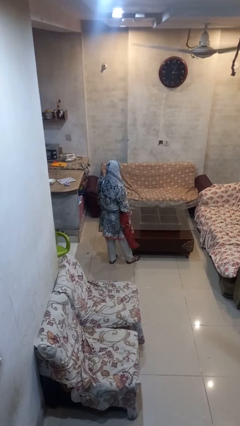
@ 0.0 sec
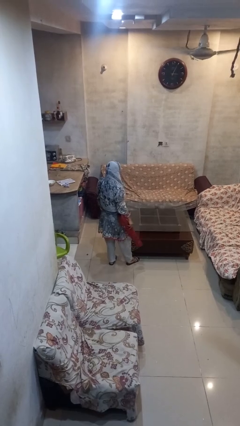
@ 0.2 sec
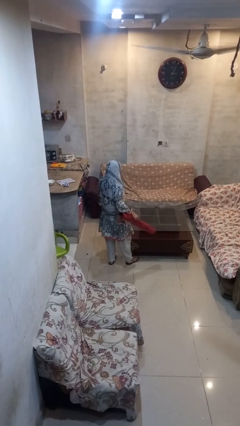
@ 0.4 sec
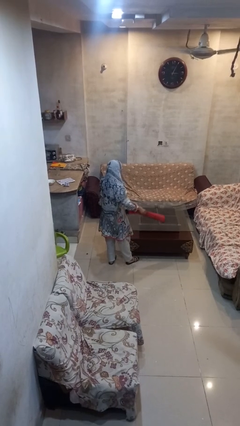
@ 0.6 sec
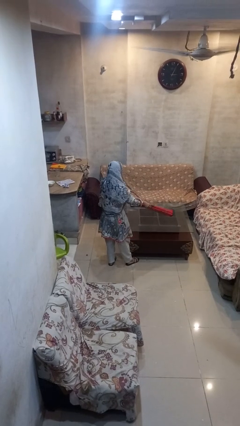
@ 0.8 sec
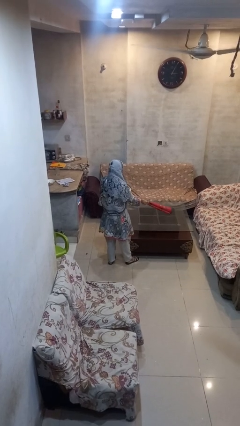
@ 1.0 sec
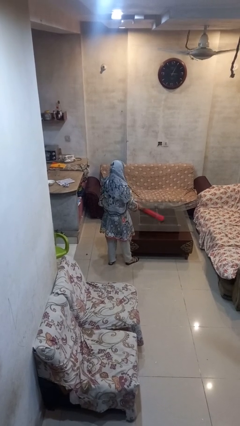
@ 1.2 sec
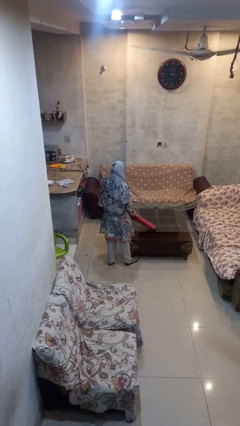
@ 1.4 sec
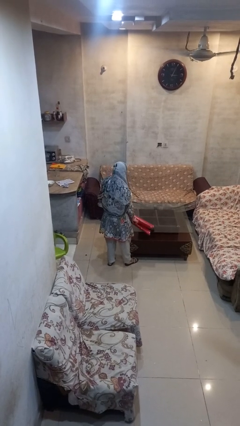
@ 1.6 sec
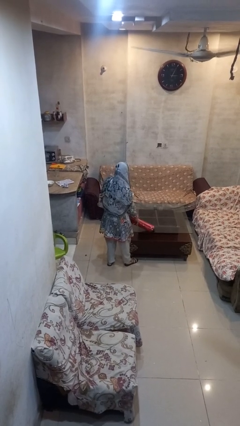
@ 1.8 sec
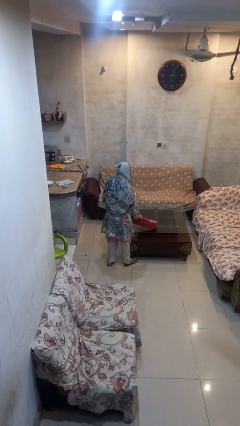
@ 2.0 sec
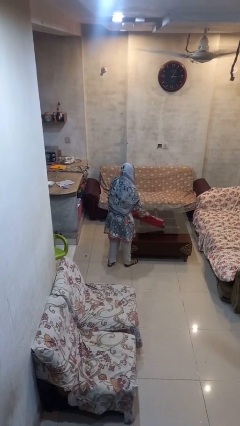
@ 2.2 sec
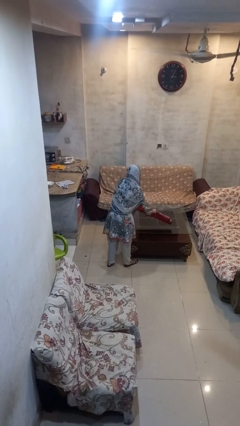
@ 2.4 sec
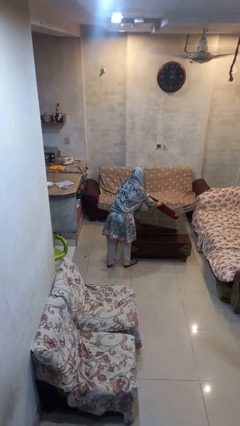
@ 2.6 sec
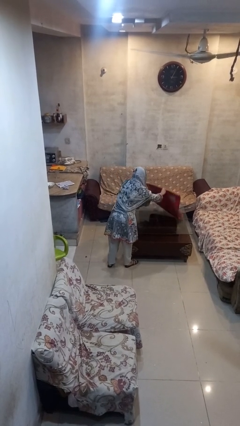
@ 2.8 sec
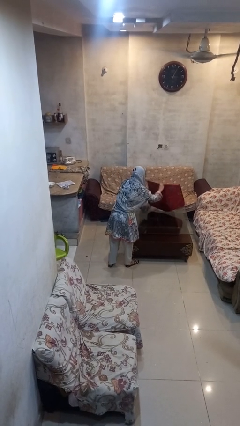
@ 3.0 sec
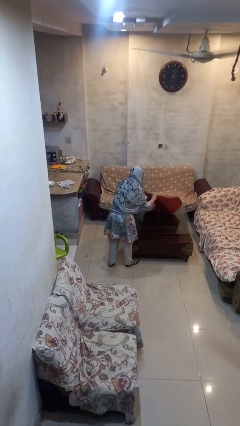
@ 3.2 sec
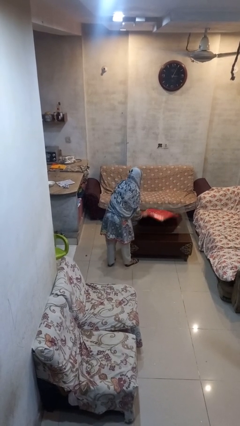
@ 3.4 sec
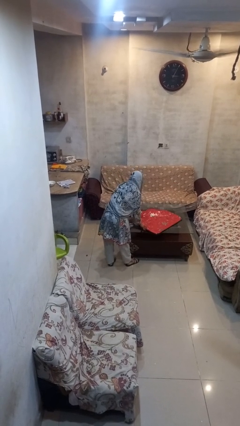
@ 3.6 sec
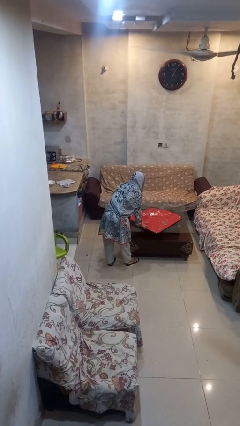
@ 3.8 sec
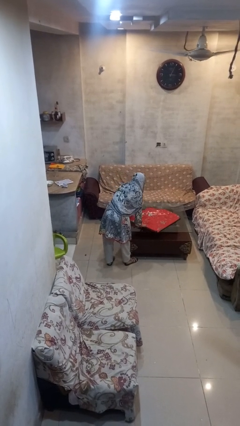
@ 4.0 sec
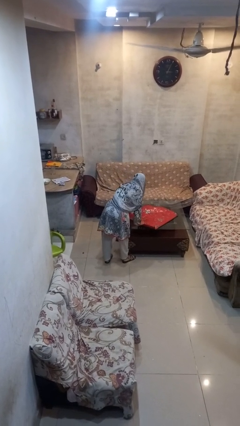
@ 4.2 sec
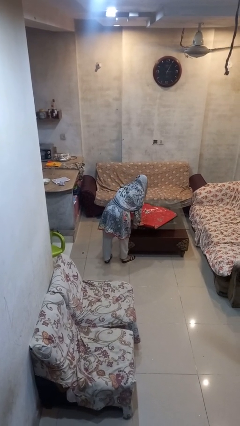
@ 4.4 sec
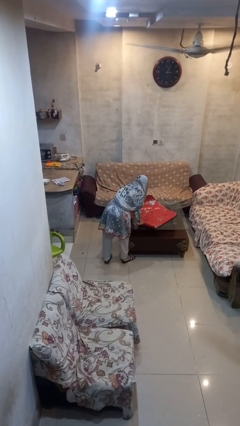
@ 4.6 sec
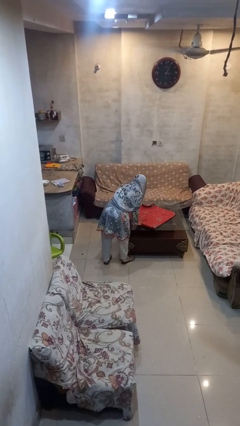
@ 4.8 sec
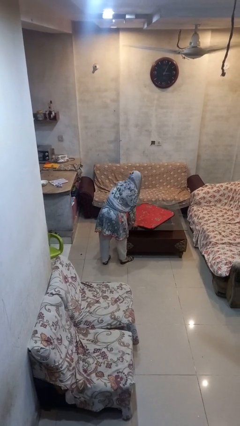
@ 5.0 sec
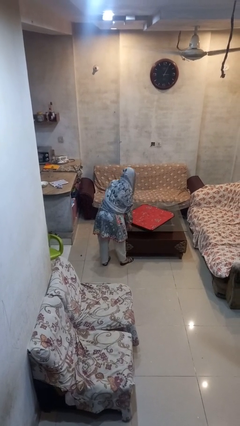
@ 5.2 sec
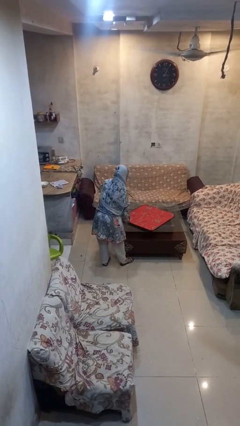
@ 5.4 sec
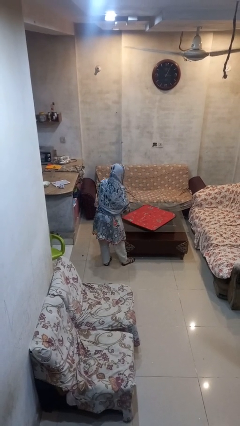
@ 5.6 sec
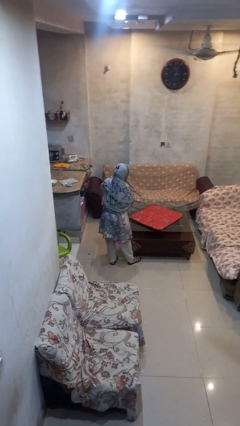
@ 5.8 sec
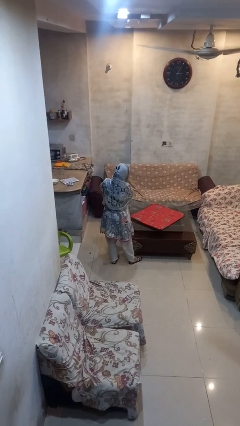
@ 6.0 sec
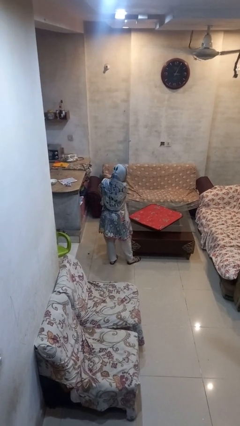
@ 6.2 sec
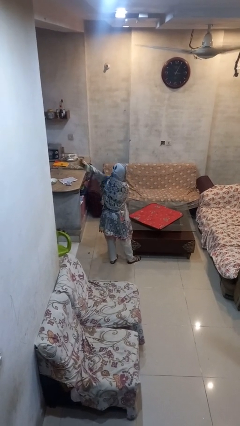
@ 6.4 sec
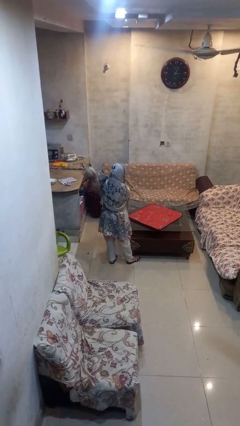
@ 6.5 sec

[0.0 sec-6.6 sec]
person spreads tablecloth

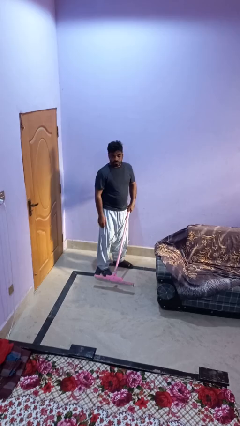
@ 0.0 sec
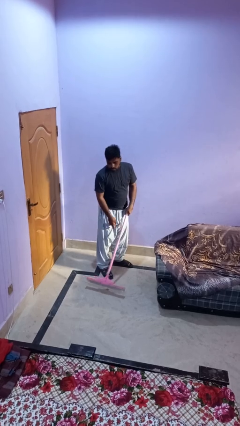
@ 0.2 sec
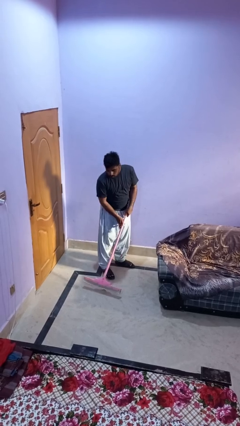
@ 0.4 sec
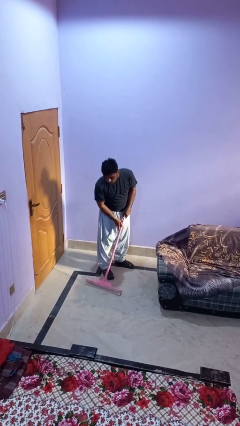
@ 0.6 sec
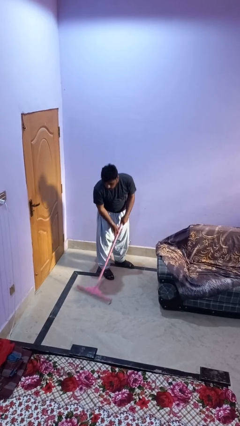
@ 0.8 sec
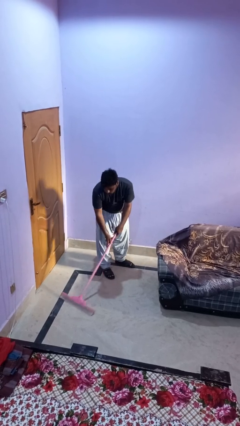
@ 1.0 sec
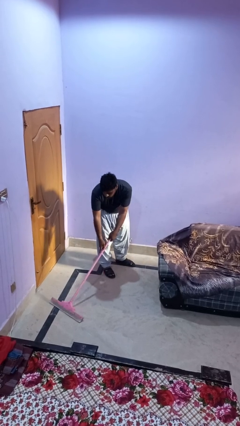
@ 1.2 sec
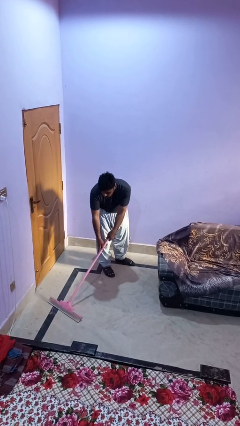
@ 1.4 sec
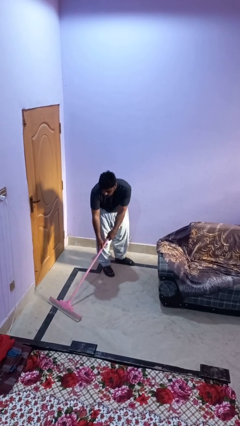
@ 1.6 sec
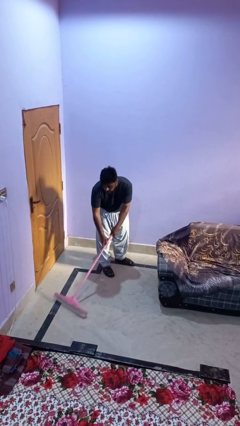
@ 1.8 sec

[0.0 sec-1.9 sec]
person vacuums carpet

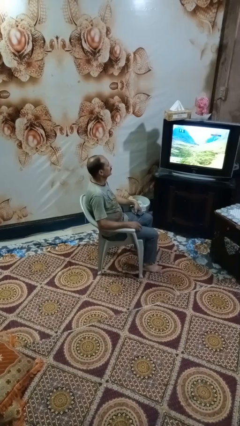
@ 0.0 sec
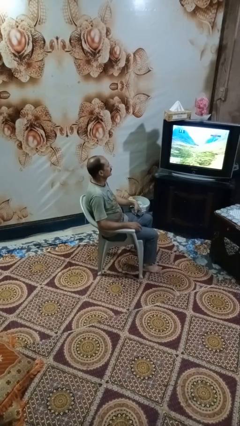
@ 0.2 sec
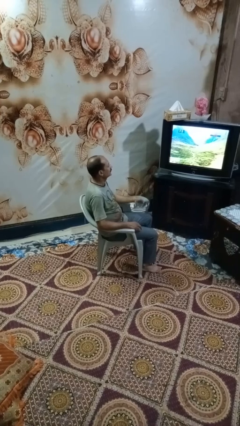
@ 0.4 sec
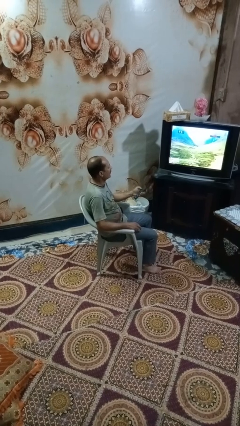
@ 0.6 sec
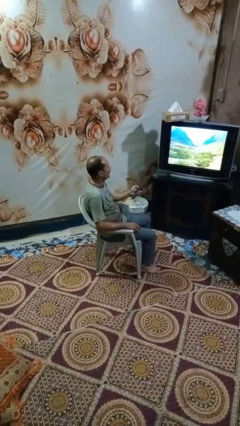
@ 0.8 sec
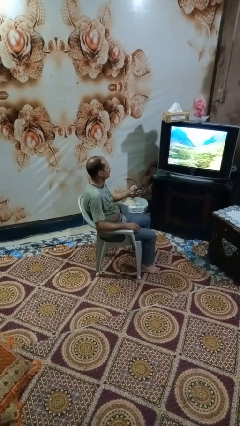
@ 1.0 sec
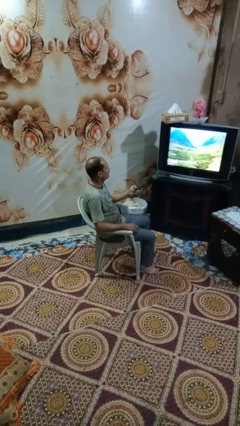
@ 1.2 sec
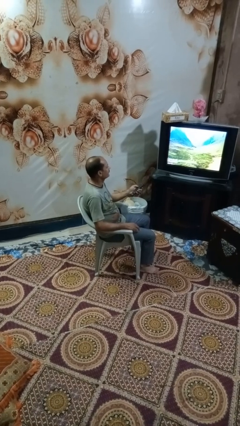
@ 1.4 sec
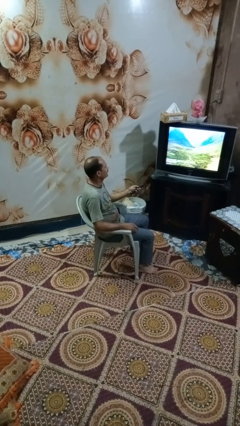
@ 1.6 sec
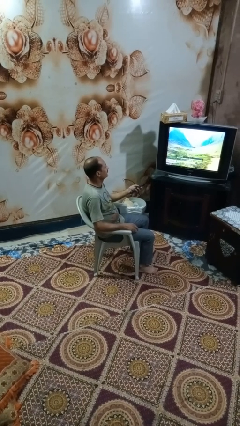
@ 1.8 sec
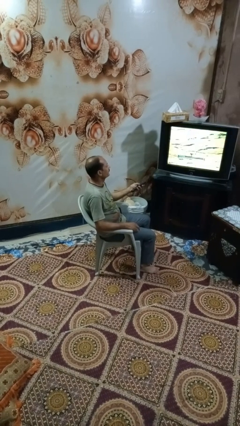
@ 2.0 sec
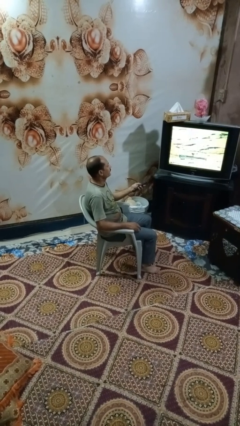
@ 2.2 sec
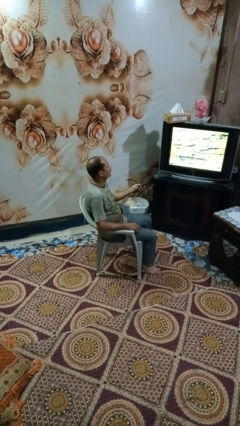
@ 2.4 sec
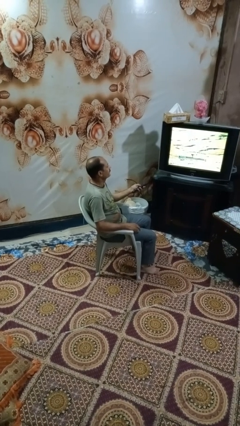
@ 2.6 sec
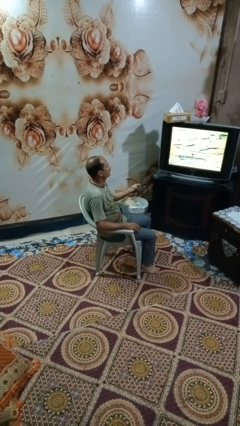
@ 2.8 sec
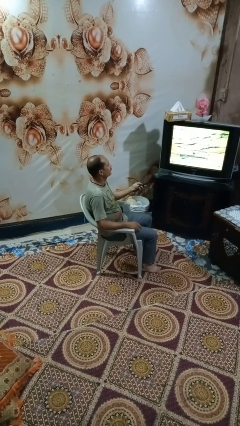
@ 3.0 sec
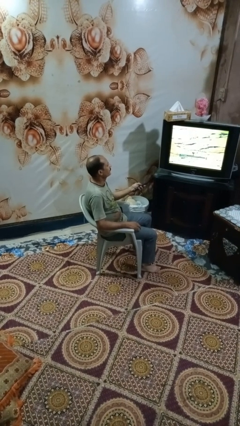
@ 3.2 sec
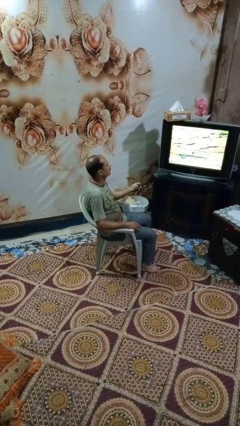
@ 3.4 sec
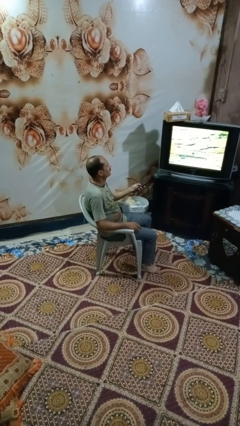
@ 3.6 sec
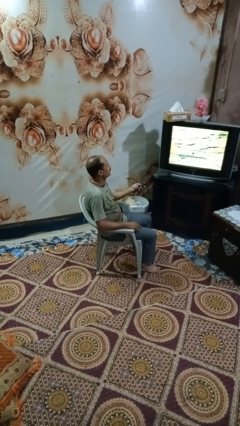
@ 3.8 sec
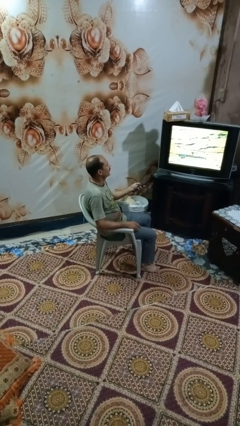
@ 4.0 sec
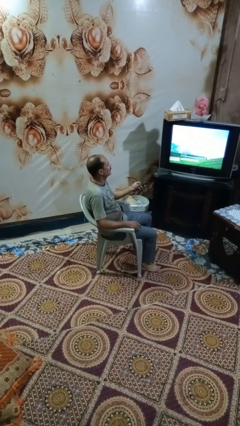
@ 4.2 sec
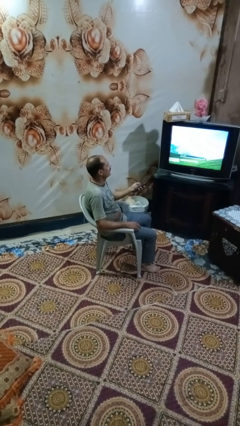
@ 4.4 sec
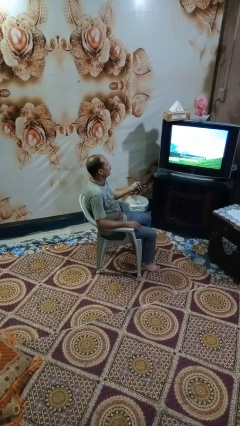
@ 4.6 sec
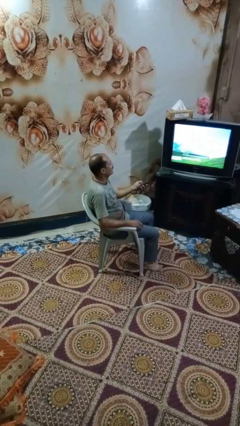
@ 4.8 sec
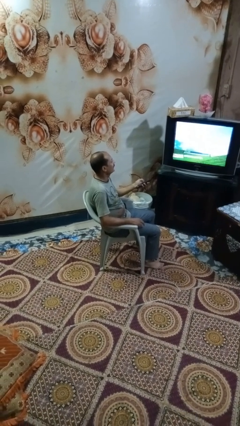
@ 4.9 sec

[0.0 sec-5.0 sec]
person uses television remote

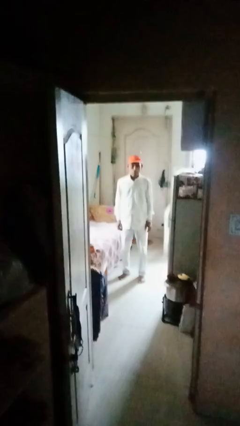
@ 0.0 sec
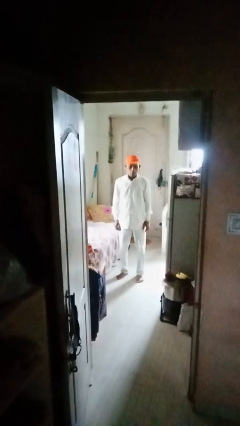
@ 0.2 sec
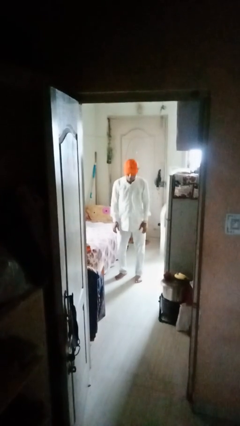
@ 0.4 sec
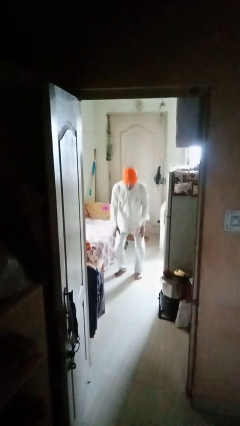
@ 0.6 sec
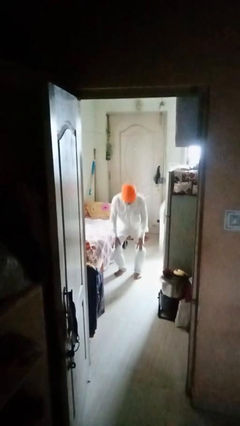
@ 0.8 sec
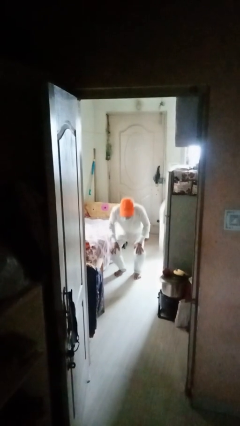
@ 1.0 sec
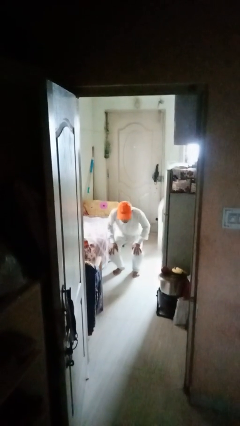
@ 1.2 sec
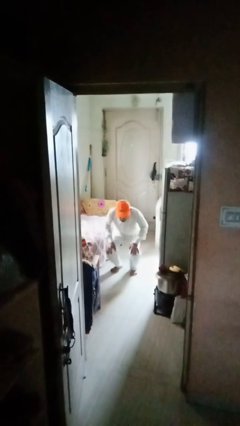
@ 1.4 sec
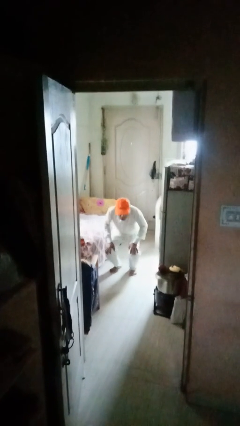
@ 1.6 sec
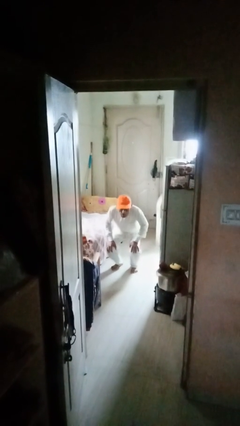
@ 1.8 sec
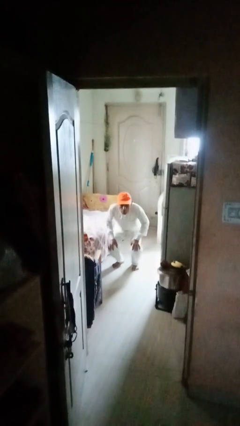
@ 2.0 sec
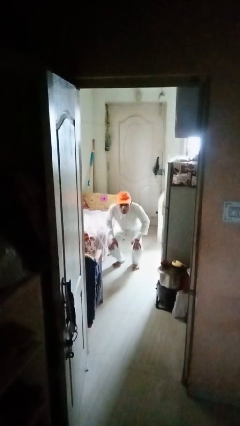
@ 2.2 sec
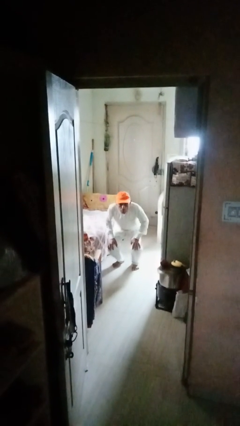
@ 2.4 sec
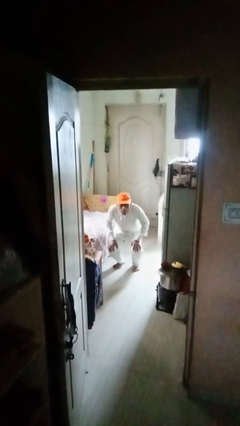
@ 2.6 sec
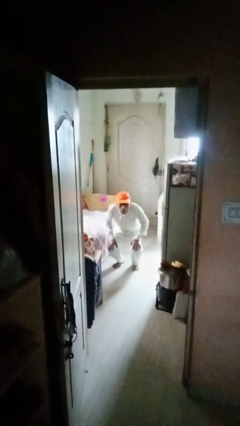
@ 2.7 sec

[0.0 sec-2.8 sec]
person squats

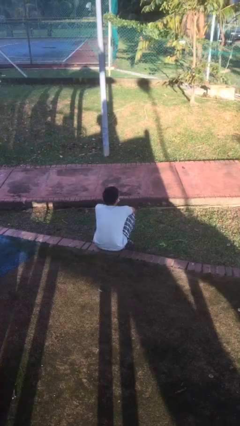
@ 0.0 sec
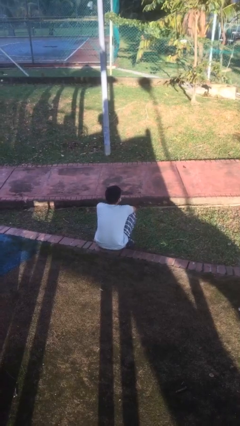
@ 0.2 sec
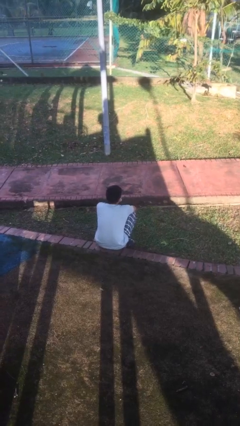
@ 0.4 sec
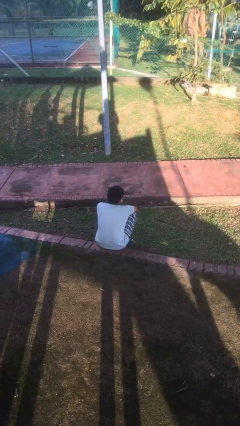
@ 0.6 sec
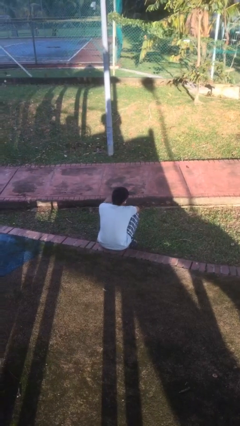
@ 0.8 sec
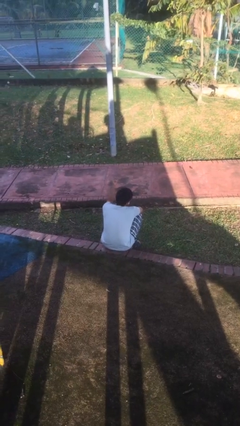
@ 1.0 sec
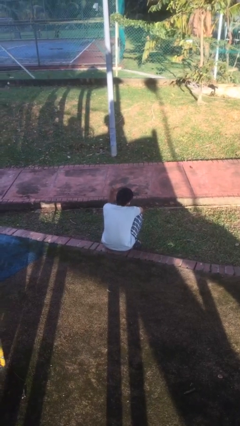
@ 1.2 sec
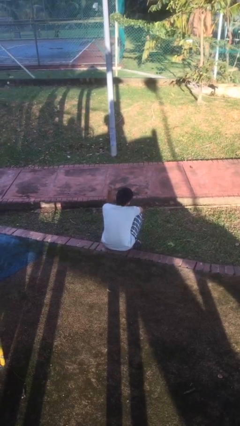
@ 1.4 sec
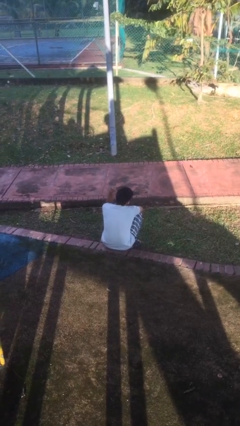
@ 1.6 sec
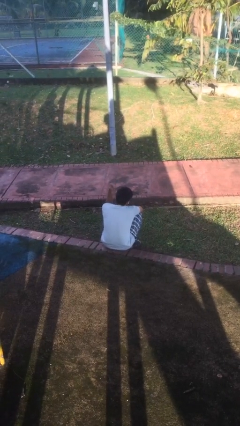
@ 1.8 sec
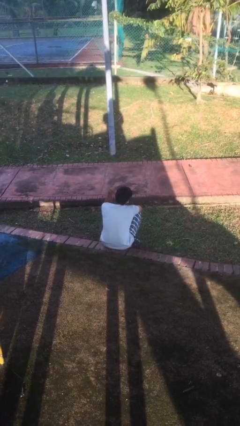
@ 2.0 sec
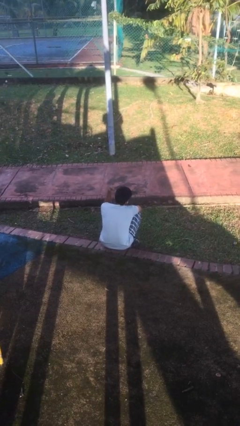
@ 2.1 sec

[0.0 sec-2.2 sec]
person gestures listen closely
